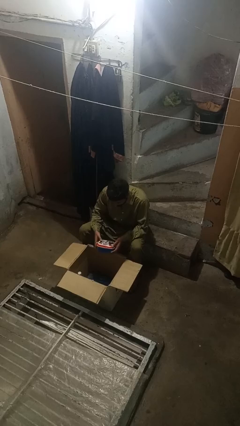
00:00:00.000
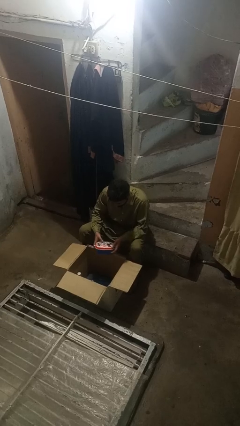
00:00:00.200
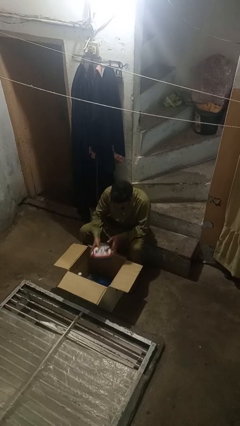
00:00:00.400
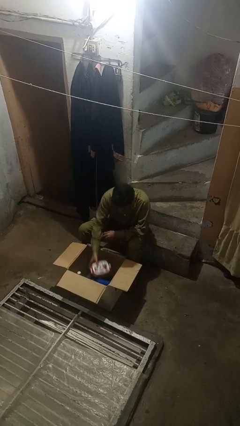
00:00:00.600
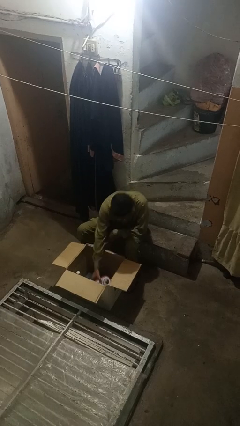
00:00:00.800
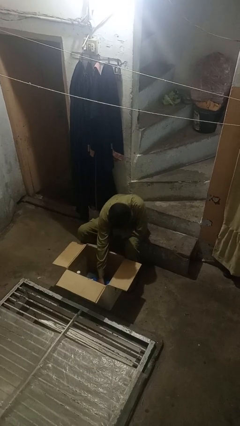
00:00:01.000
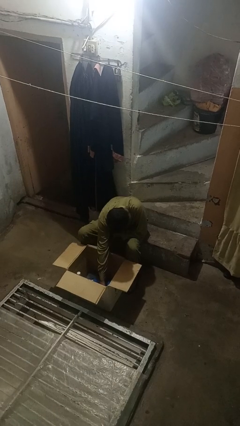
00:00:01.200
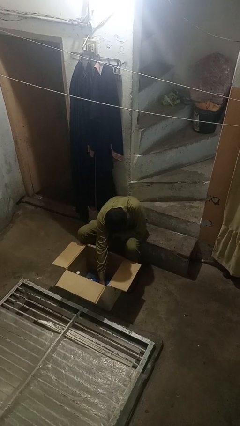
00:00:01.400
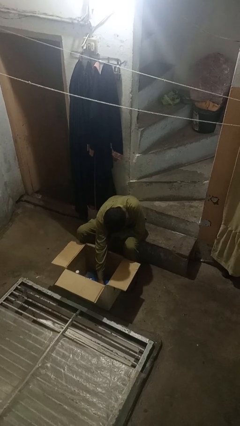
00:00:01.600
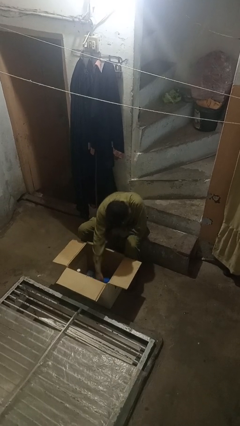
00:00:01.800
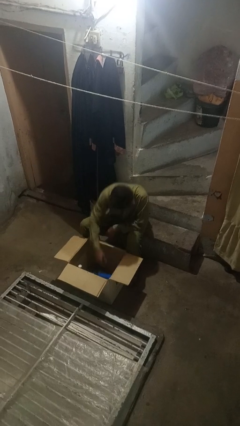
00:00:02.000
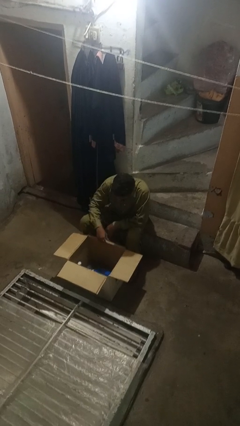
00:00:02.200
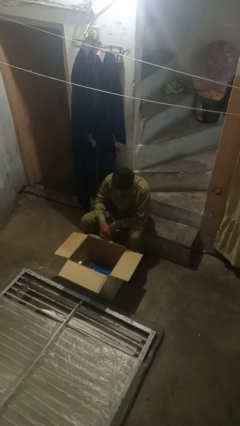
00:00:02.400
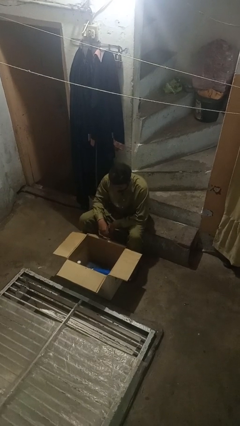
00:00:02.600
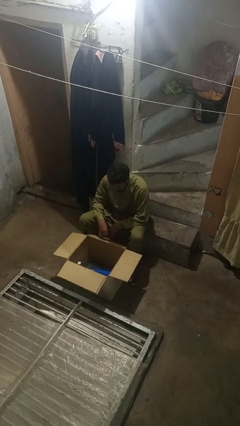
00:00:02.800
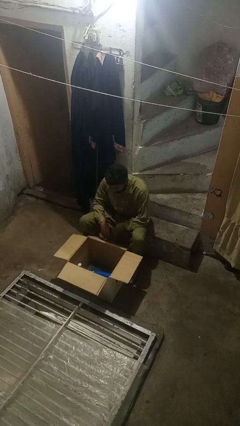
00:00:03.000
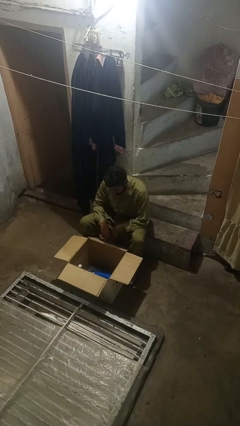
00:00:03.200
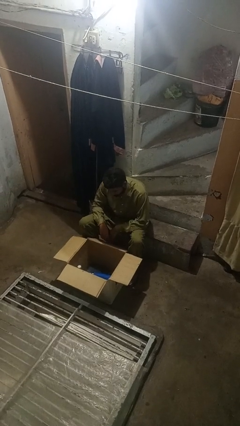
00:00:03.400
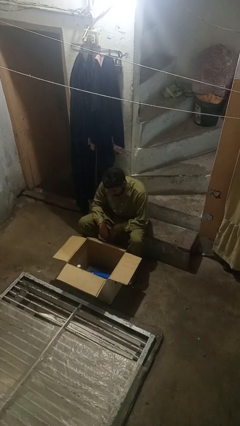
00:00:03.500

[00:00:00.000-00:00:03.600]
person puts object into box

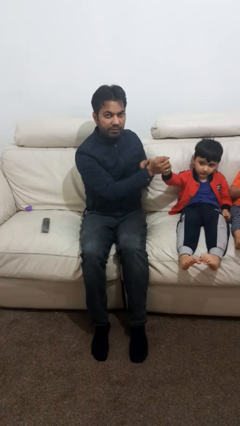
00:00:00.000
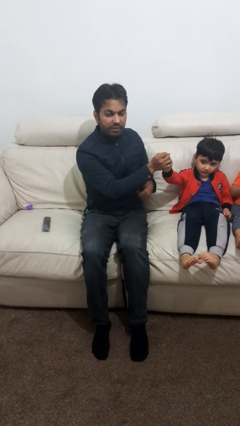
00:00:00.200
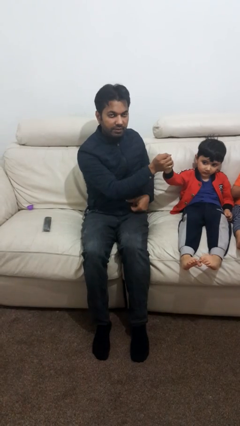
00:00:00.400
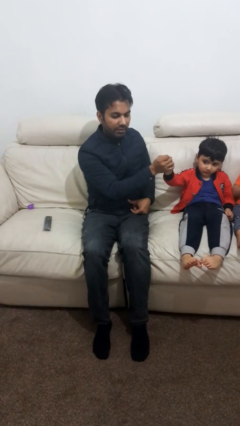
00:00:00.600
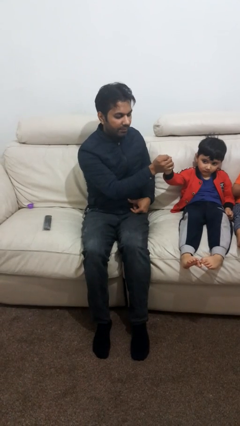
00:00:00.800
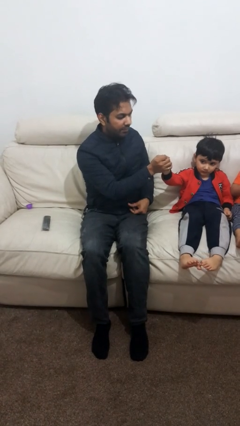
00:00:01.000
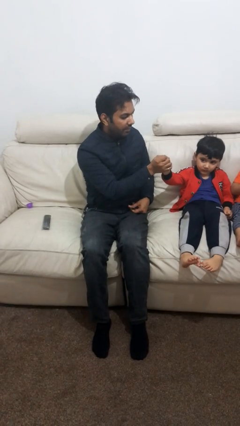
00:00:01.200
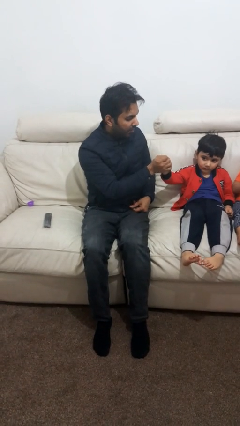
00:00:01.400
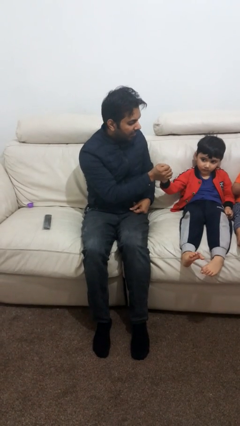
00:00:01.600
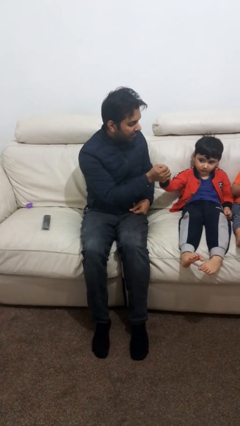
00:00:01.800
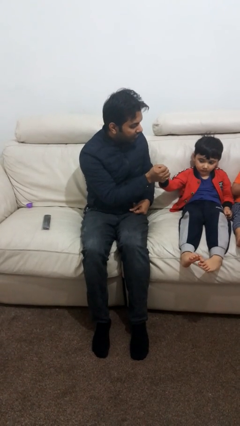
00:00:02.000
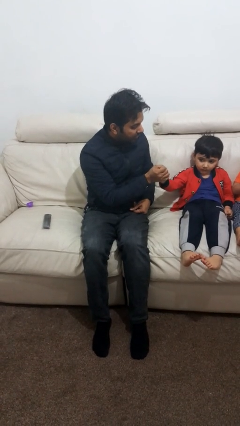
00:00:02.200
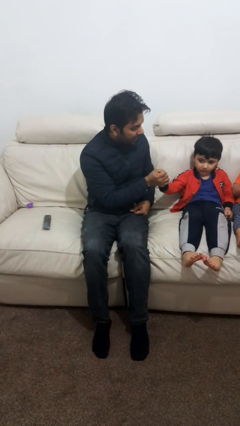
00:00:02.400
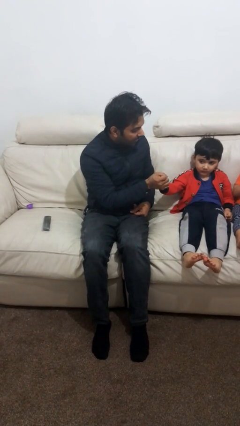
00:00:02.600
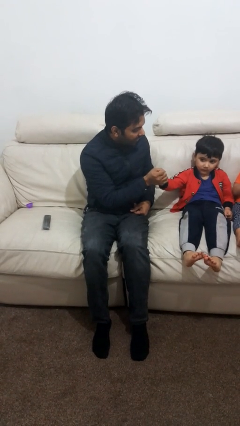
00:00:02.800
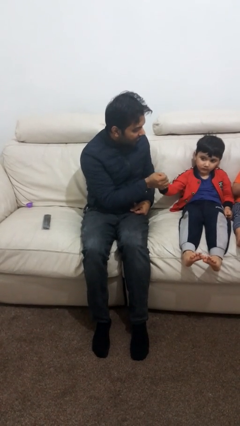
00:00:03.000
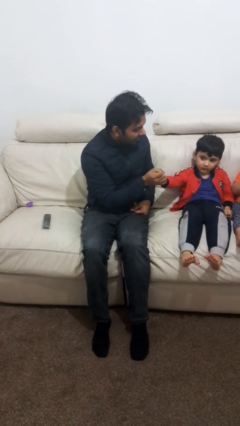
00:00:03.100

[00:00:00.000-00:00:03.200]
person highfives hand

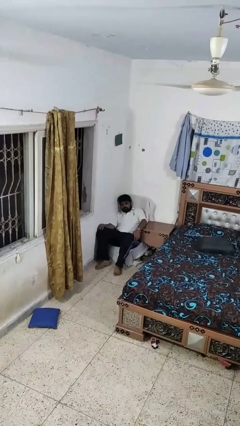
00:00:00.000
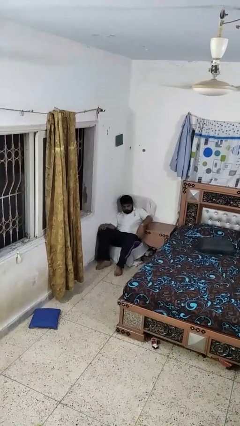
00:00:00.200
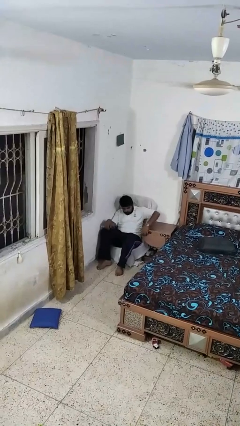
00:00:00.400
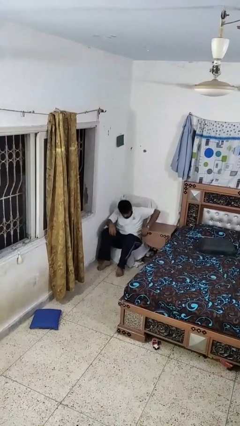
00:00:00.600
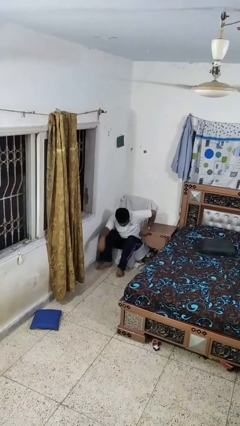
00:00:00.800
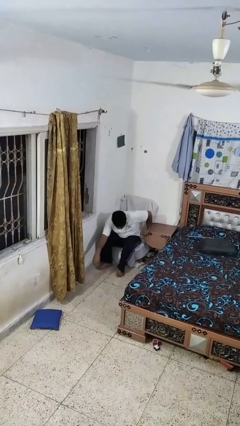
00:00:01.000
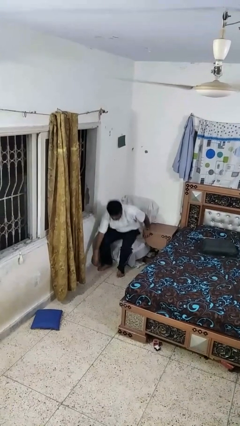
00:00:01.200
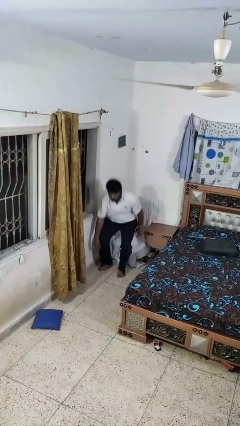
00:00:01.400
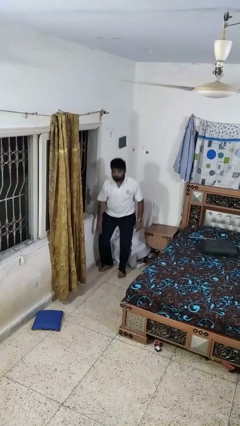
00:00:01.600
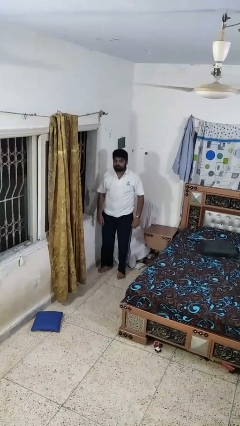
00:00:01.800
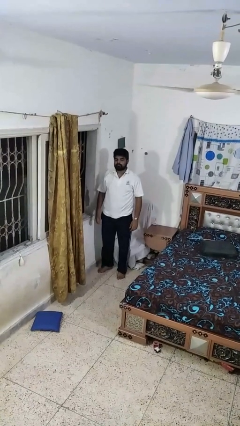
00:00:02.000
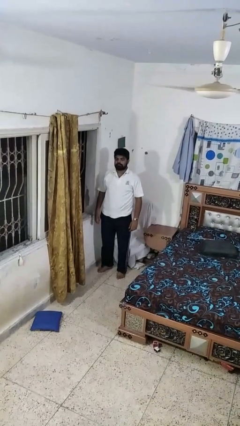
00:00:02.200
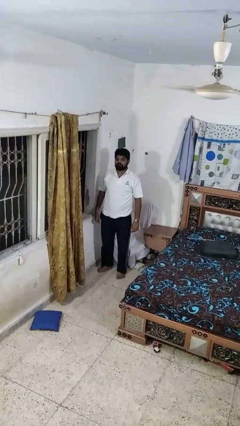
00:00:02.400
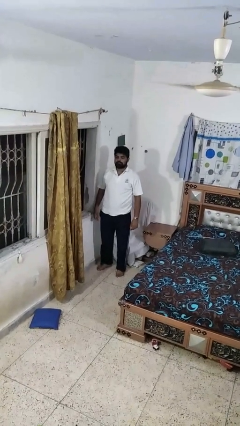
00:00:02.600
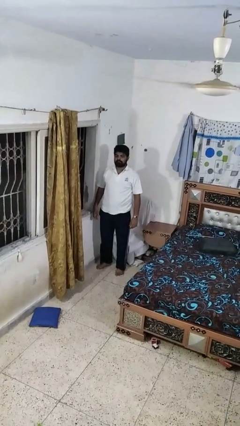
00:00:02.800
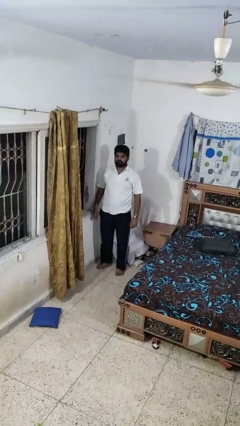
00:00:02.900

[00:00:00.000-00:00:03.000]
person stands up

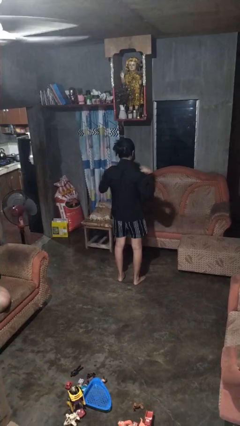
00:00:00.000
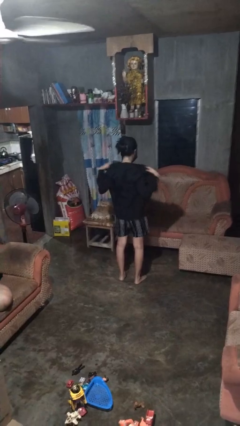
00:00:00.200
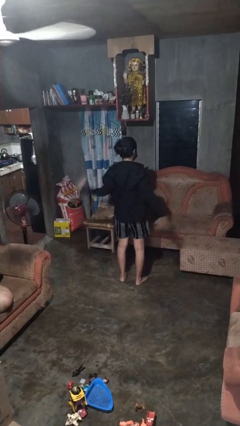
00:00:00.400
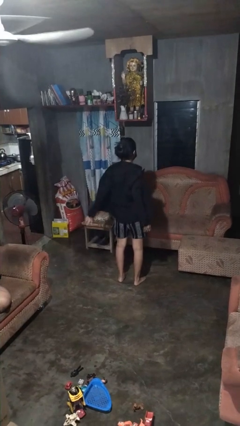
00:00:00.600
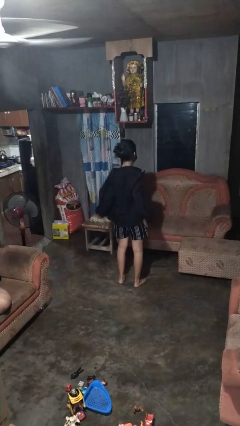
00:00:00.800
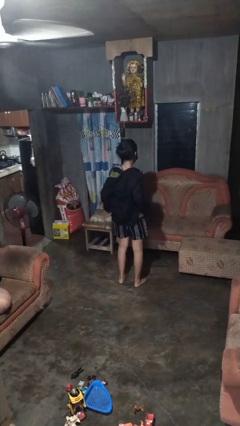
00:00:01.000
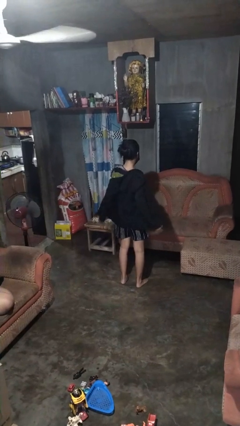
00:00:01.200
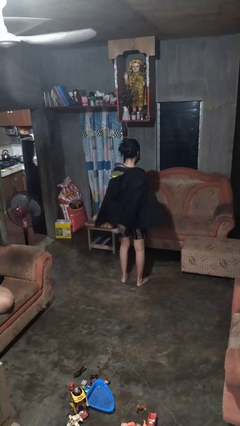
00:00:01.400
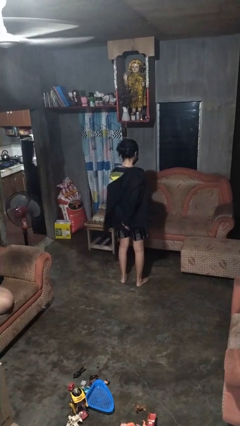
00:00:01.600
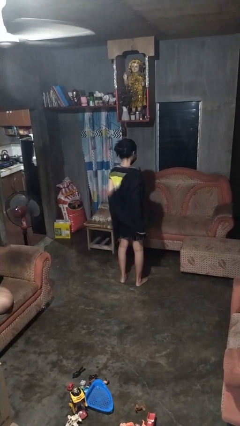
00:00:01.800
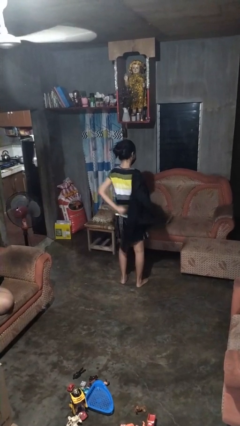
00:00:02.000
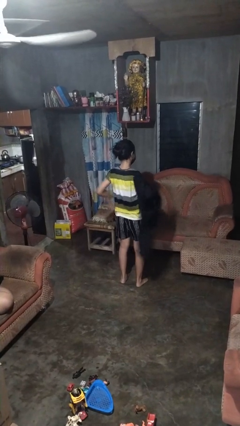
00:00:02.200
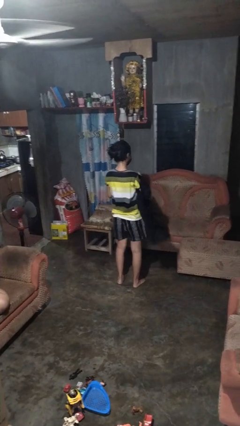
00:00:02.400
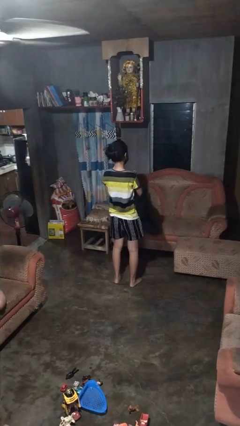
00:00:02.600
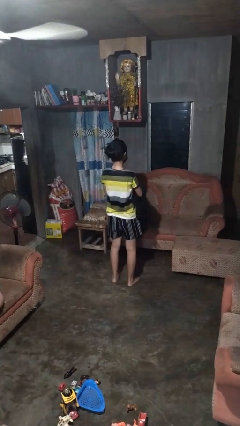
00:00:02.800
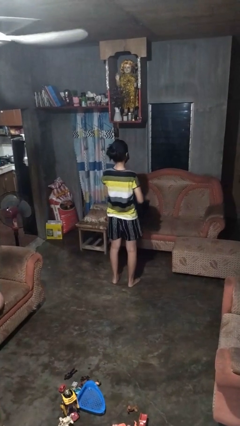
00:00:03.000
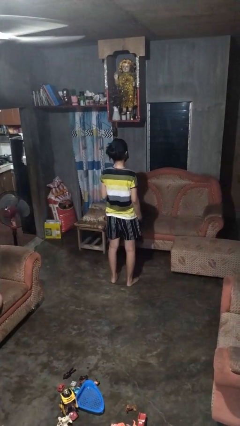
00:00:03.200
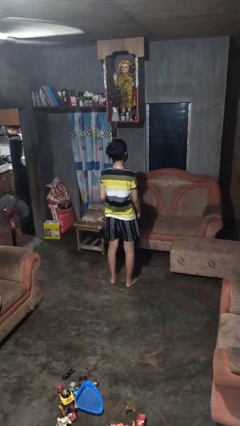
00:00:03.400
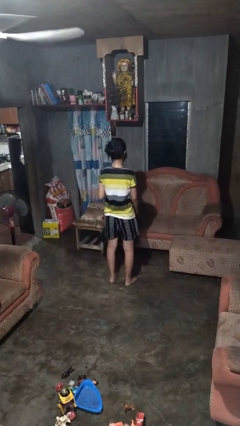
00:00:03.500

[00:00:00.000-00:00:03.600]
person takes off shirt

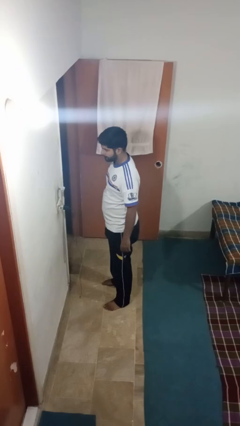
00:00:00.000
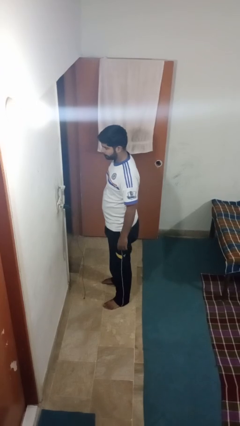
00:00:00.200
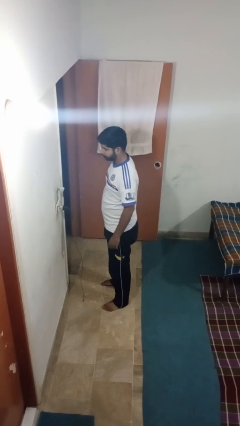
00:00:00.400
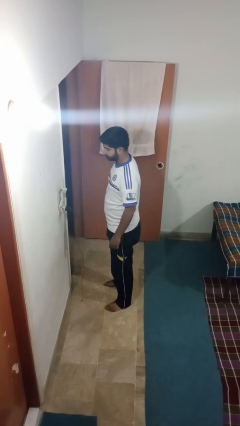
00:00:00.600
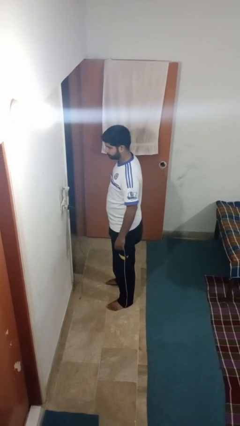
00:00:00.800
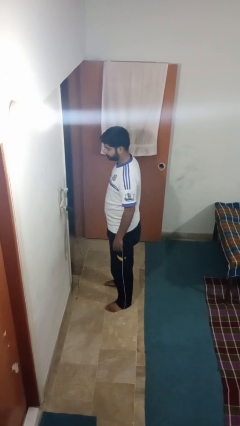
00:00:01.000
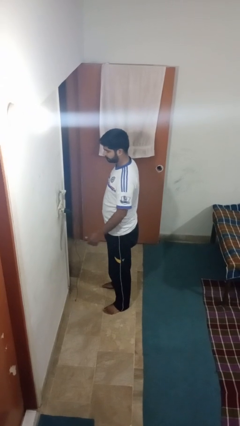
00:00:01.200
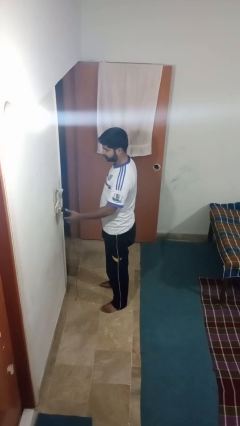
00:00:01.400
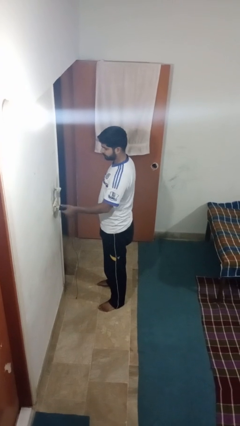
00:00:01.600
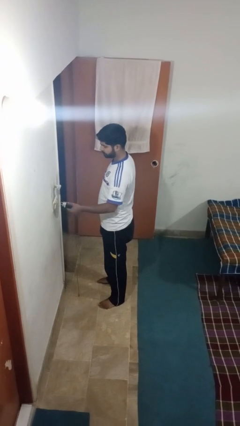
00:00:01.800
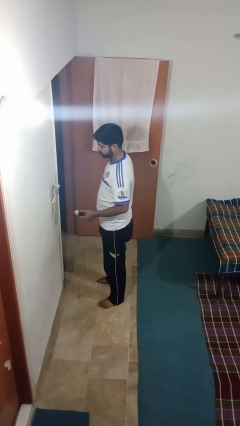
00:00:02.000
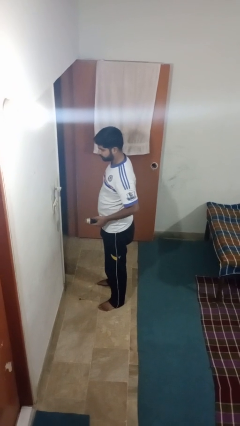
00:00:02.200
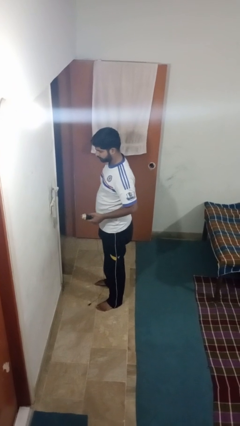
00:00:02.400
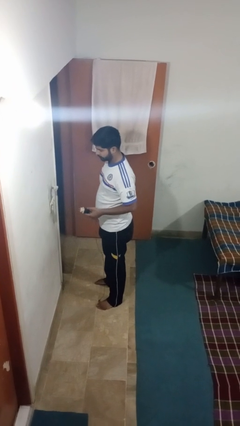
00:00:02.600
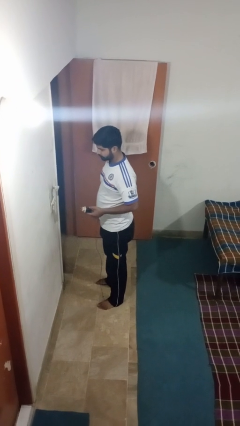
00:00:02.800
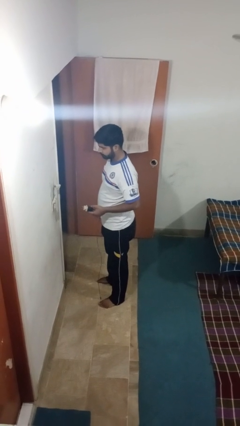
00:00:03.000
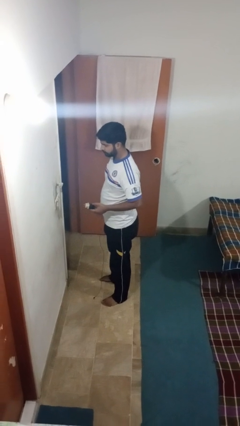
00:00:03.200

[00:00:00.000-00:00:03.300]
person unplugs from electrical socket

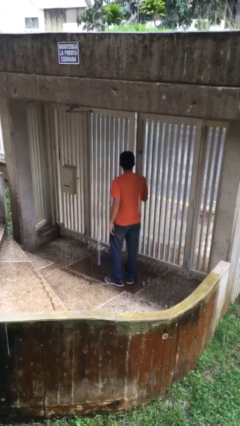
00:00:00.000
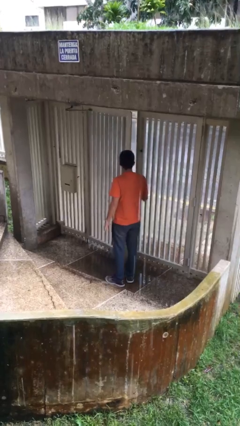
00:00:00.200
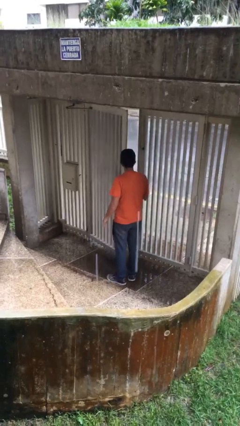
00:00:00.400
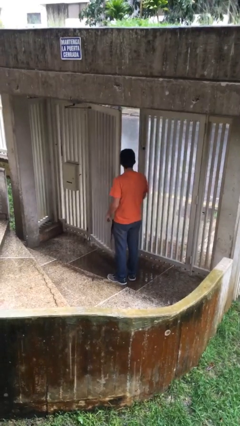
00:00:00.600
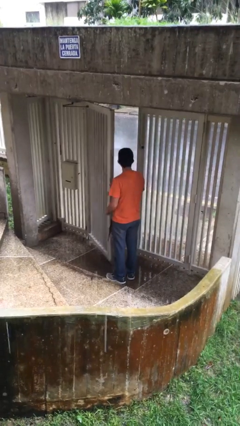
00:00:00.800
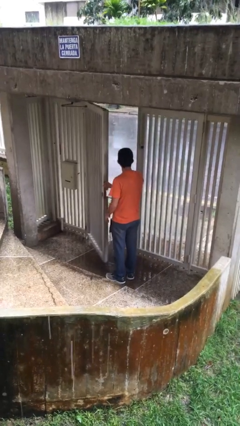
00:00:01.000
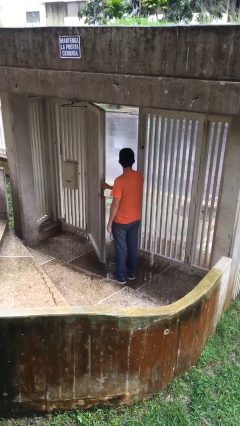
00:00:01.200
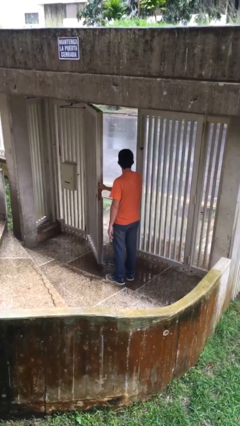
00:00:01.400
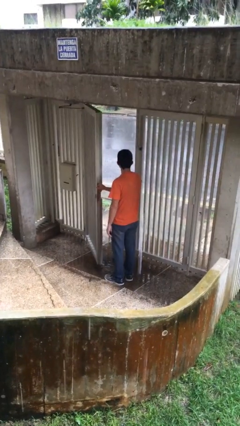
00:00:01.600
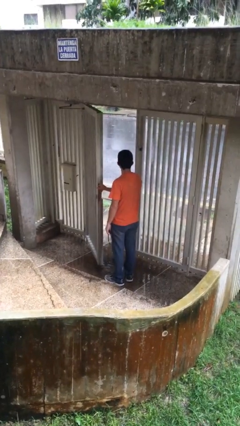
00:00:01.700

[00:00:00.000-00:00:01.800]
person opens facility door
